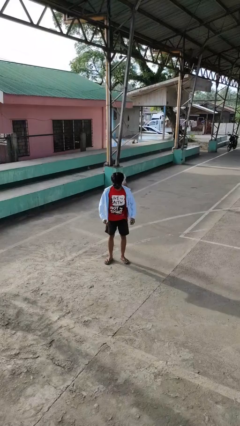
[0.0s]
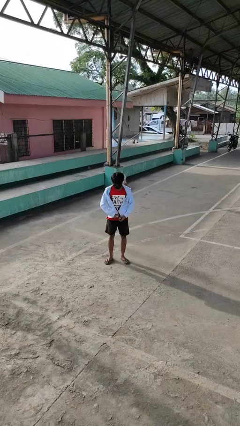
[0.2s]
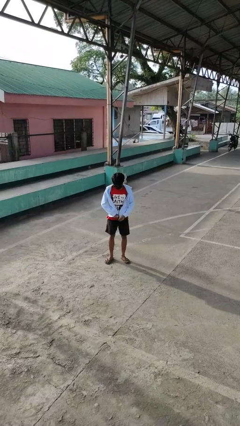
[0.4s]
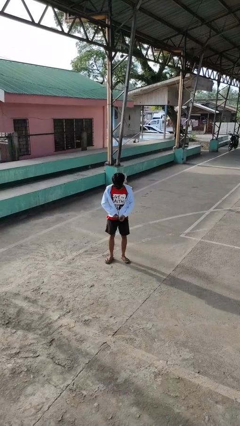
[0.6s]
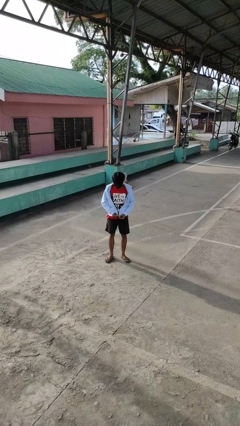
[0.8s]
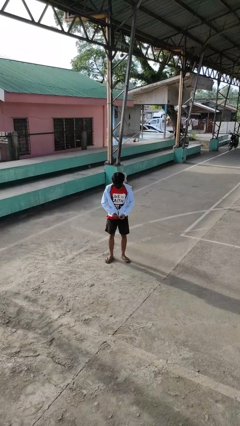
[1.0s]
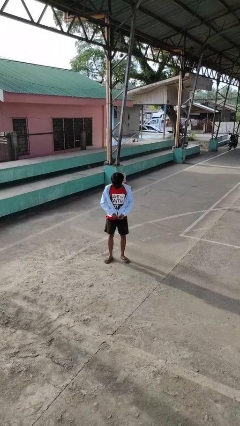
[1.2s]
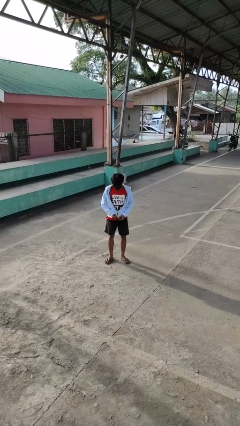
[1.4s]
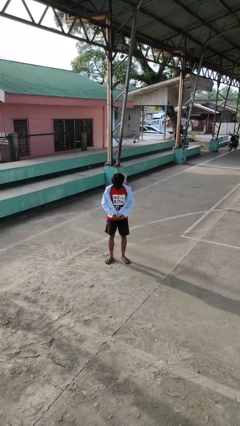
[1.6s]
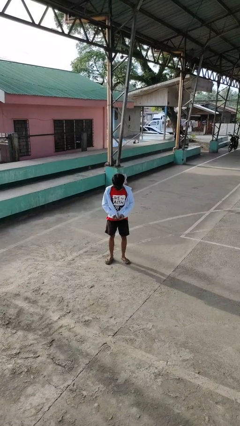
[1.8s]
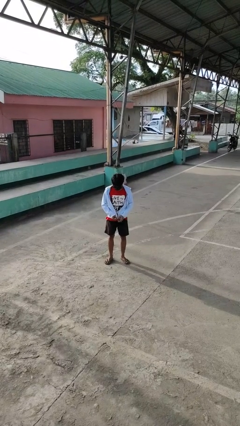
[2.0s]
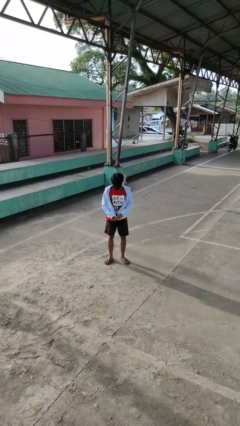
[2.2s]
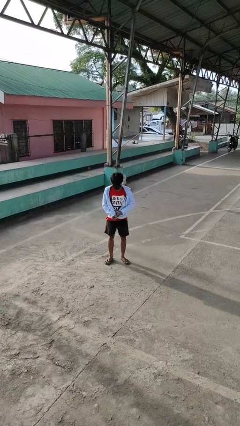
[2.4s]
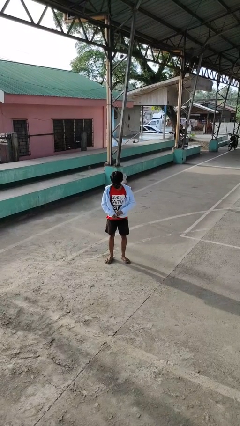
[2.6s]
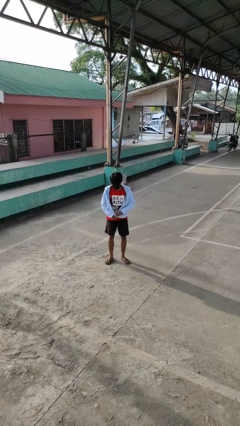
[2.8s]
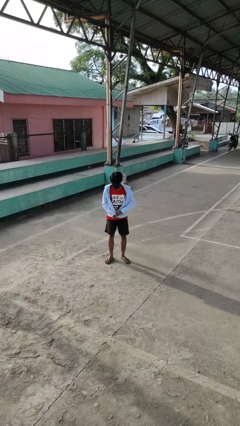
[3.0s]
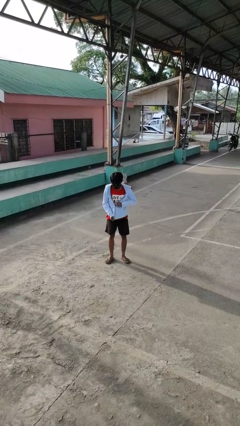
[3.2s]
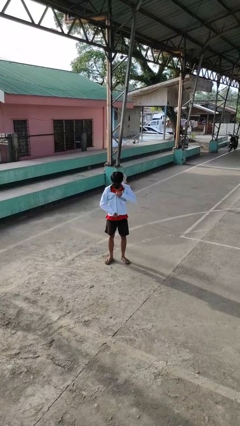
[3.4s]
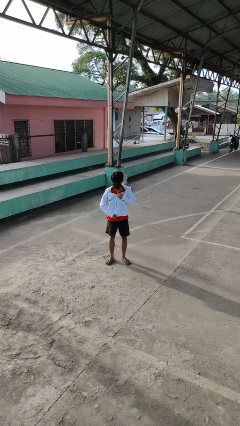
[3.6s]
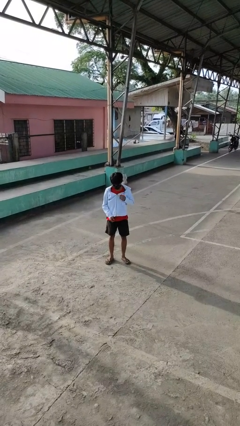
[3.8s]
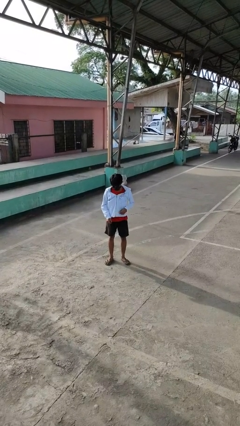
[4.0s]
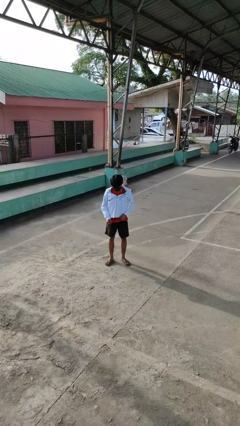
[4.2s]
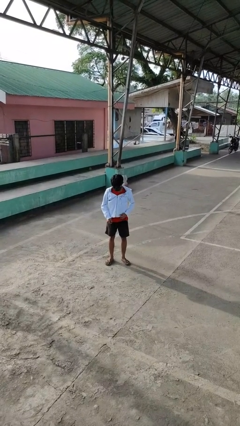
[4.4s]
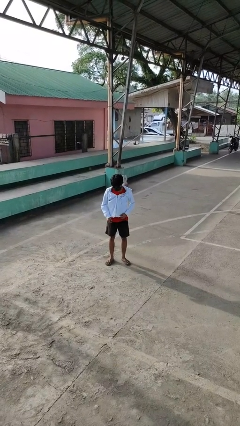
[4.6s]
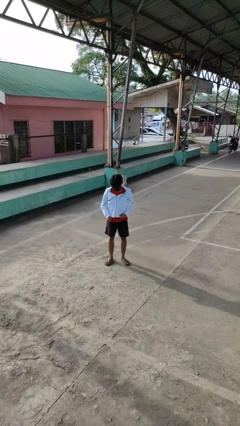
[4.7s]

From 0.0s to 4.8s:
person zips up jacket

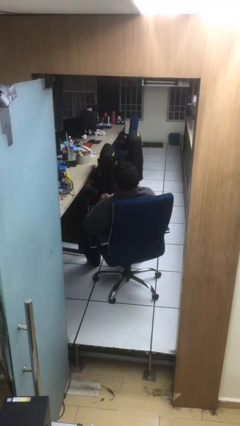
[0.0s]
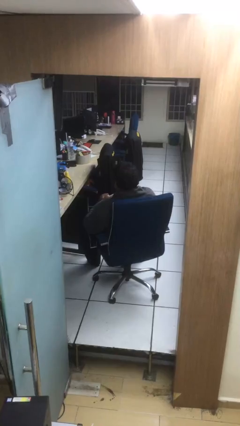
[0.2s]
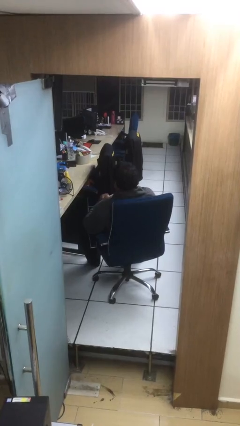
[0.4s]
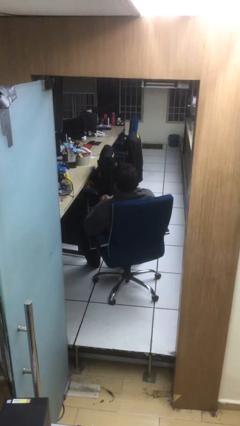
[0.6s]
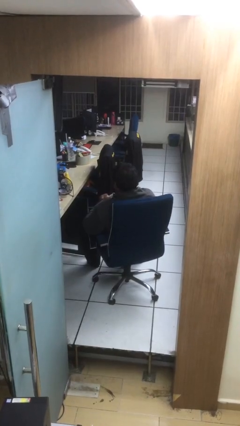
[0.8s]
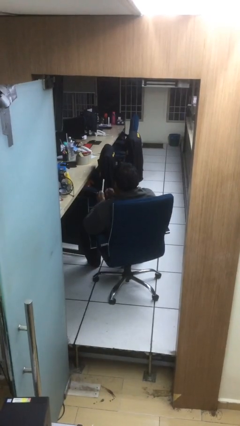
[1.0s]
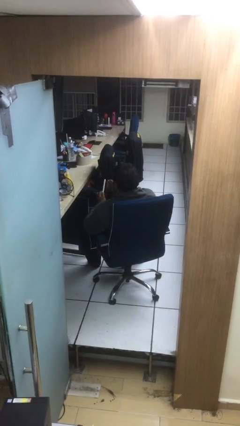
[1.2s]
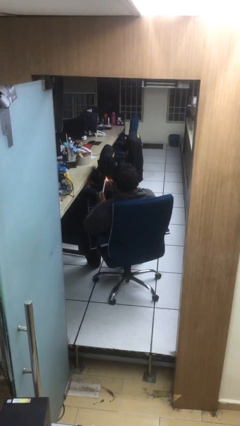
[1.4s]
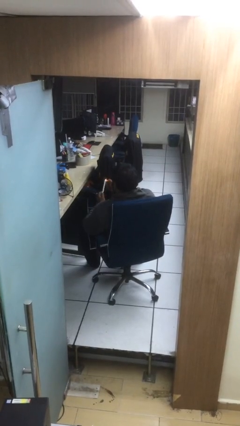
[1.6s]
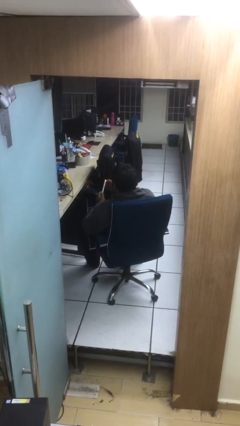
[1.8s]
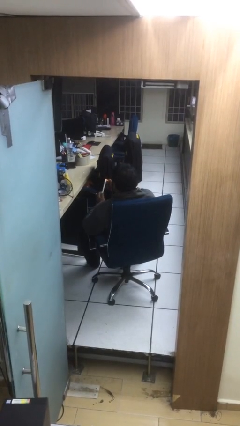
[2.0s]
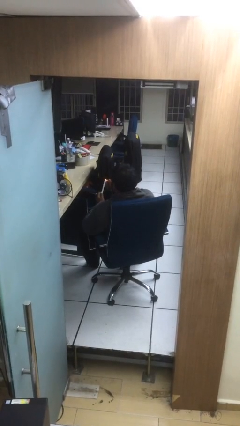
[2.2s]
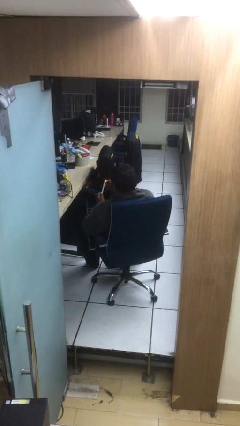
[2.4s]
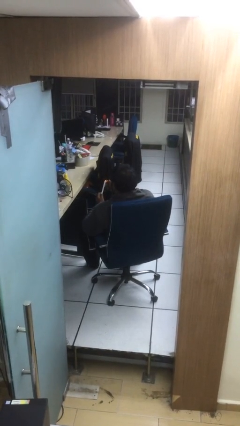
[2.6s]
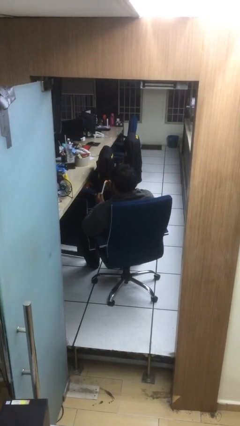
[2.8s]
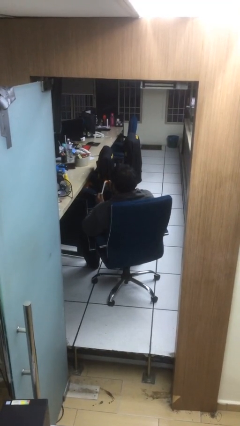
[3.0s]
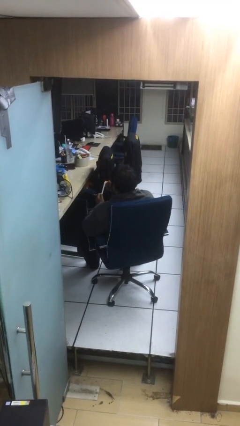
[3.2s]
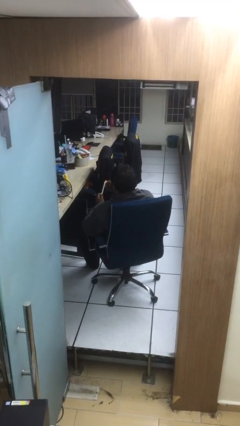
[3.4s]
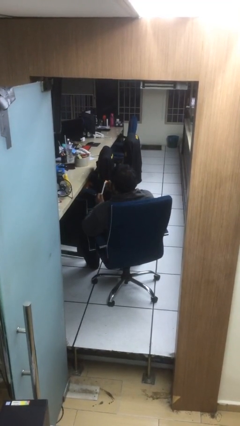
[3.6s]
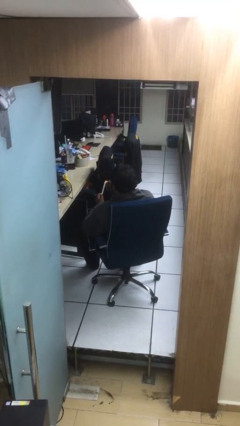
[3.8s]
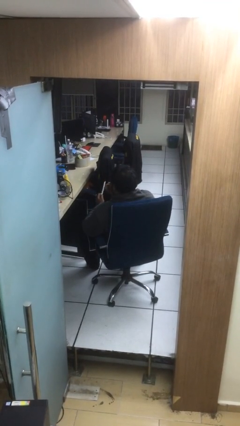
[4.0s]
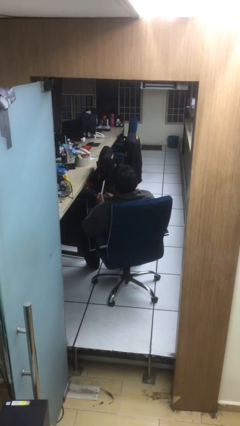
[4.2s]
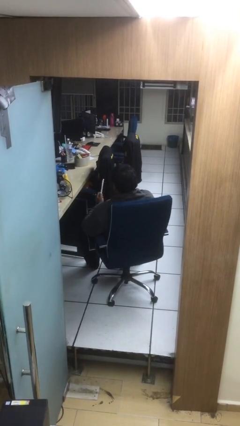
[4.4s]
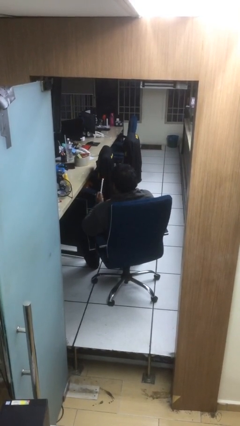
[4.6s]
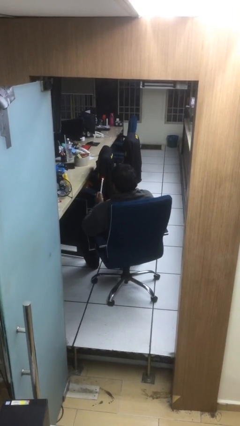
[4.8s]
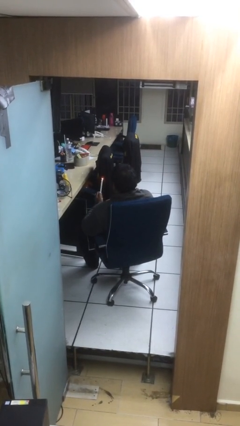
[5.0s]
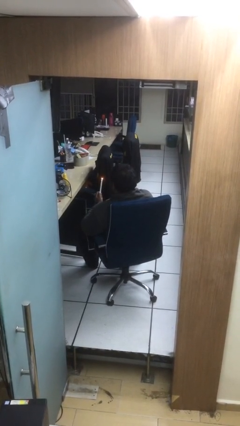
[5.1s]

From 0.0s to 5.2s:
person lights candle

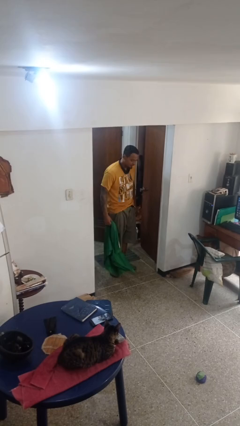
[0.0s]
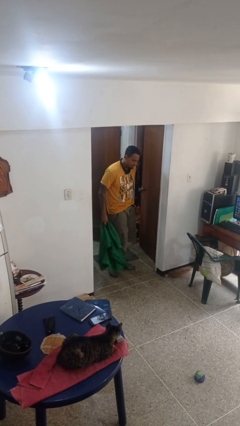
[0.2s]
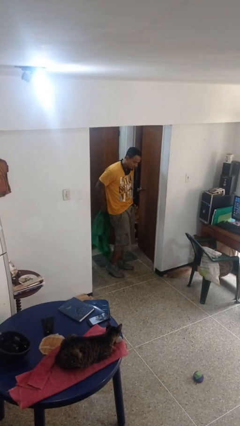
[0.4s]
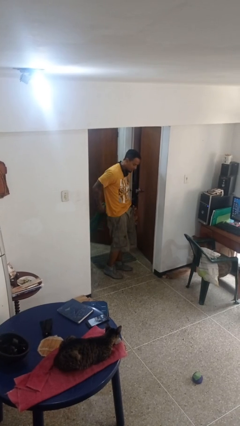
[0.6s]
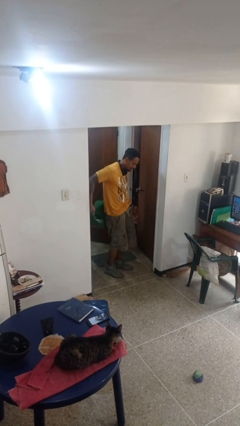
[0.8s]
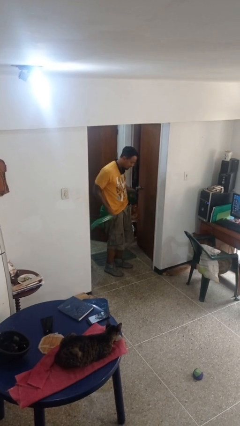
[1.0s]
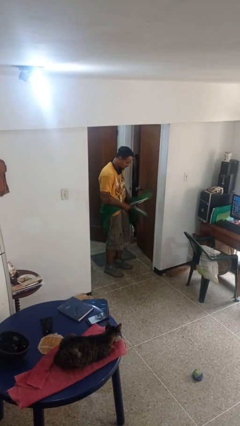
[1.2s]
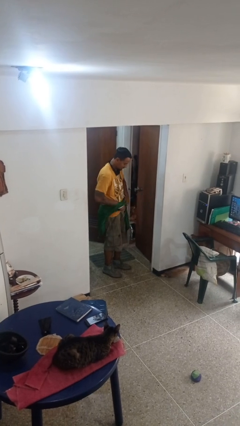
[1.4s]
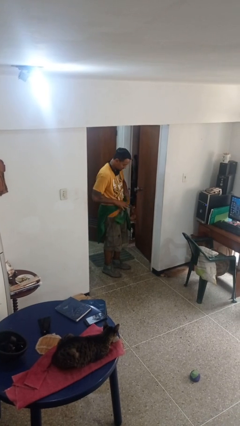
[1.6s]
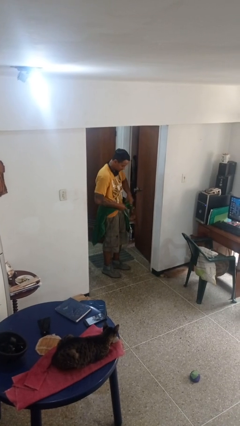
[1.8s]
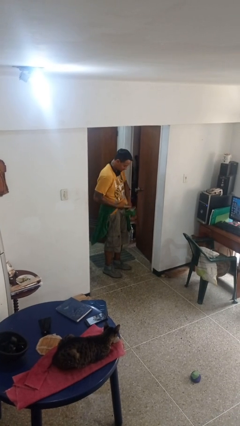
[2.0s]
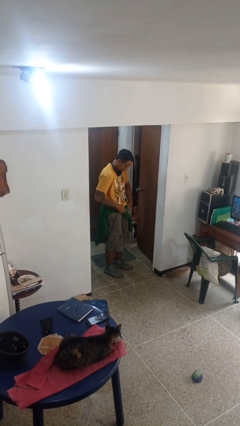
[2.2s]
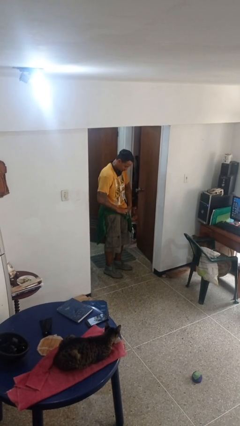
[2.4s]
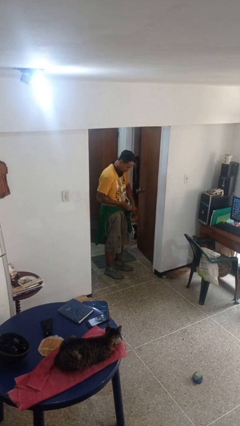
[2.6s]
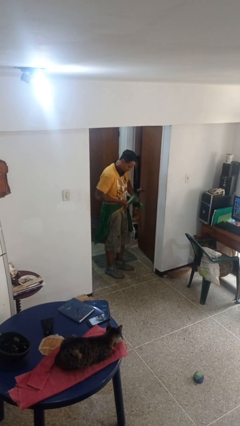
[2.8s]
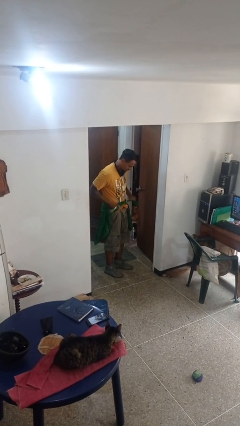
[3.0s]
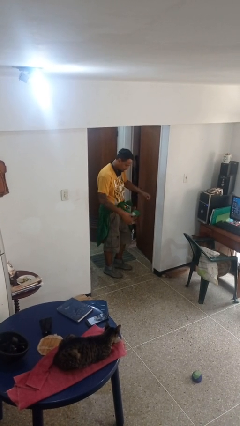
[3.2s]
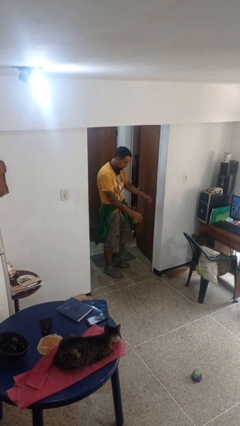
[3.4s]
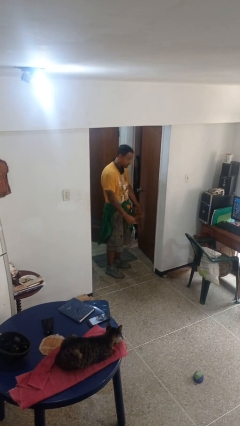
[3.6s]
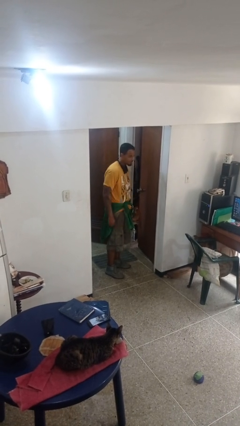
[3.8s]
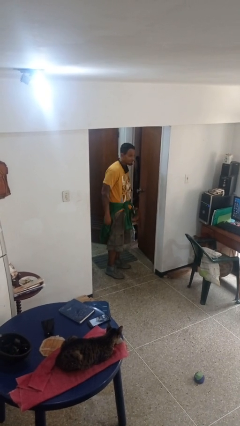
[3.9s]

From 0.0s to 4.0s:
person ties jacket around waist

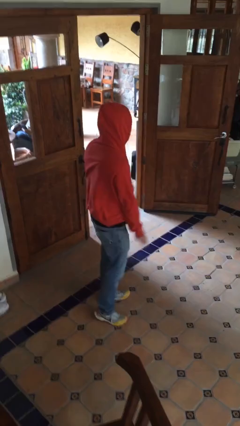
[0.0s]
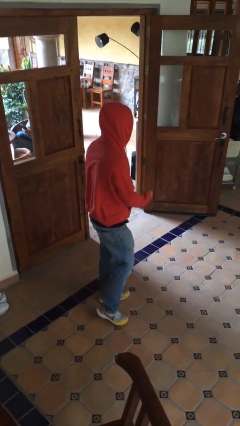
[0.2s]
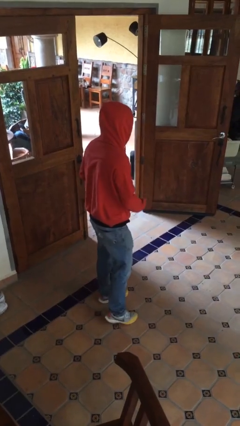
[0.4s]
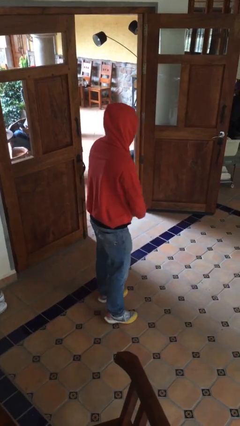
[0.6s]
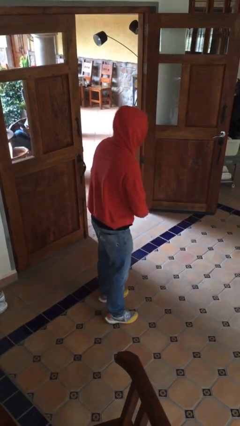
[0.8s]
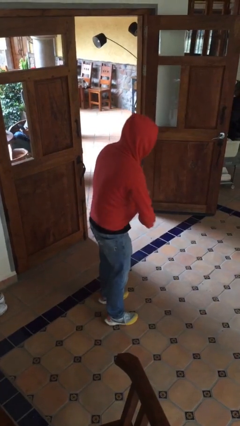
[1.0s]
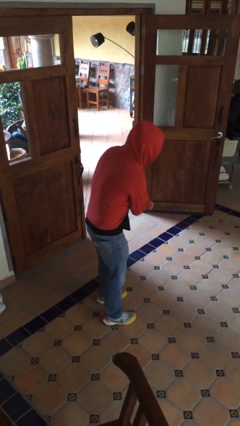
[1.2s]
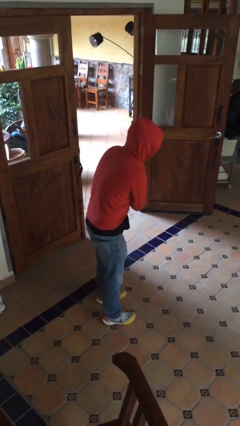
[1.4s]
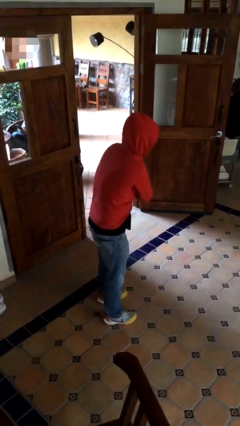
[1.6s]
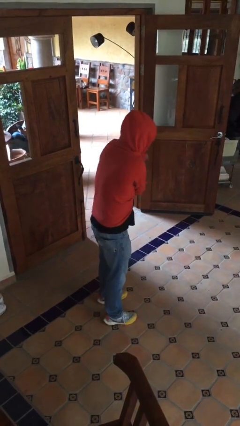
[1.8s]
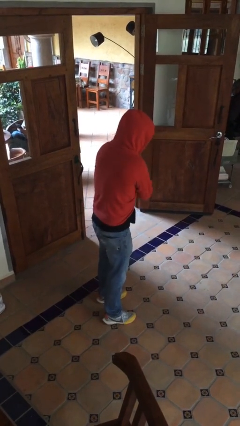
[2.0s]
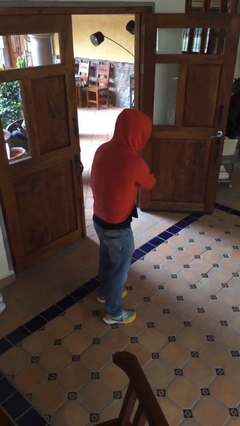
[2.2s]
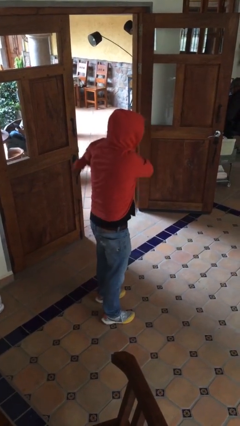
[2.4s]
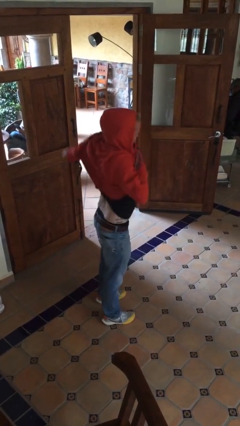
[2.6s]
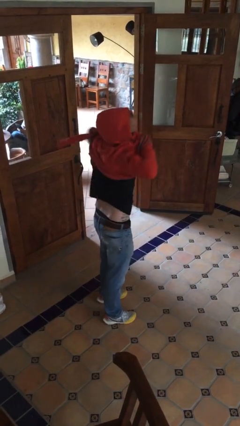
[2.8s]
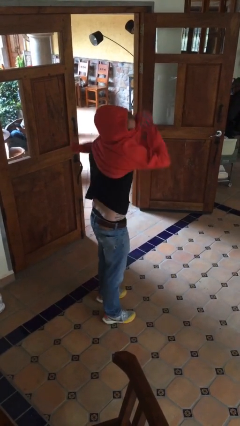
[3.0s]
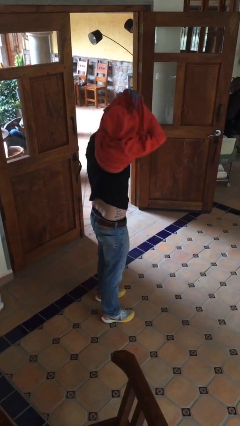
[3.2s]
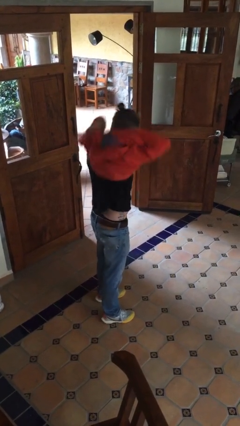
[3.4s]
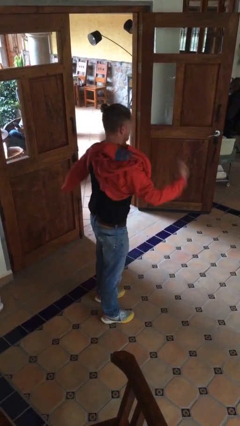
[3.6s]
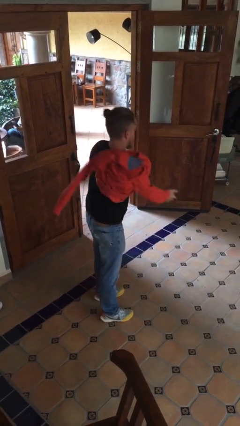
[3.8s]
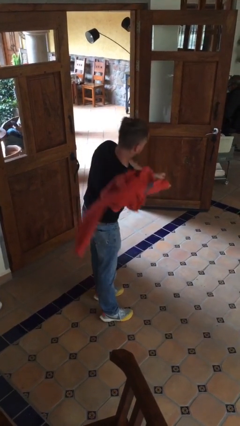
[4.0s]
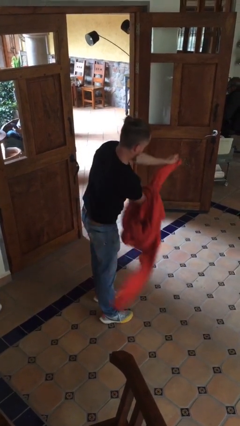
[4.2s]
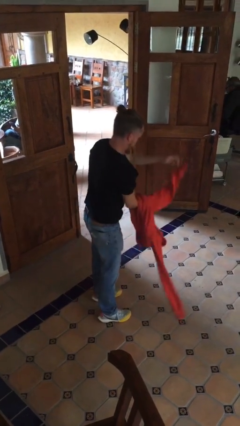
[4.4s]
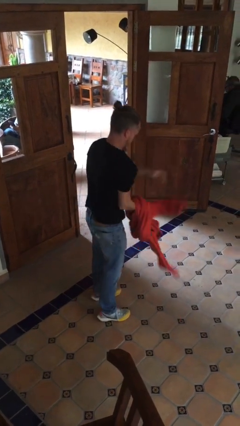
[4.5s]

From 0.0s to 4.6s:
person takes off hoodie
